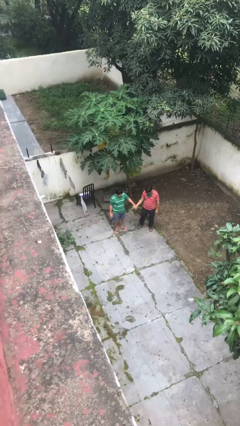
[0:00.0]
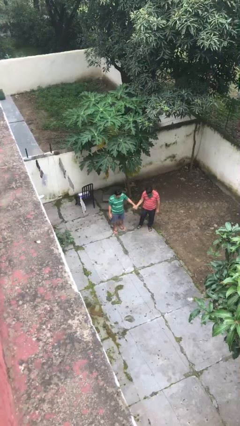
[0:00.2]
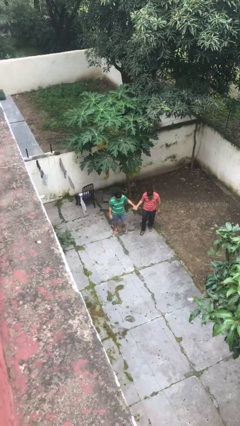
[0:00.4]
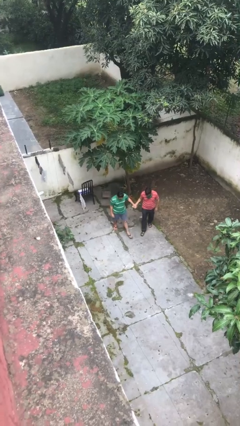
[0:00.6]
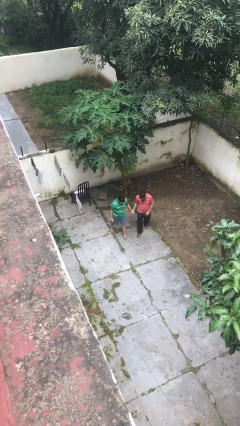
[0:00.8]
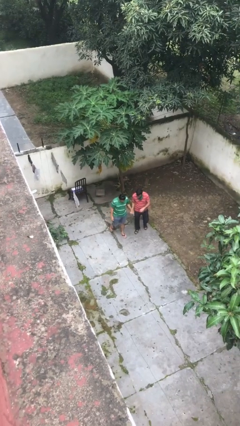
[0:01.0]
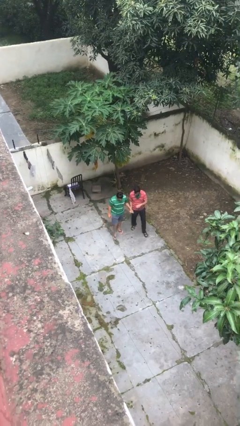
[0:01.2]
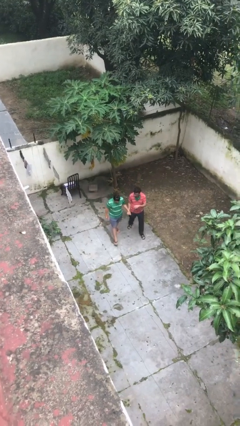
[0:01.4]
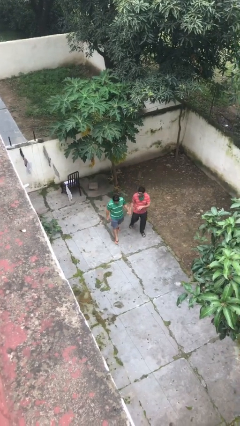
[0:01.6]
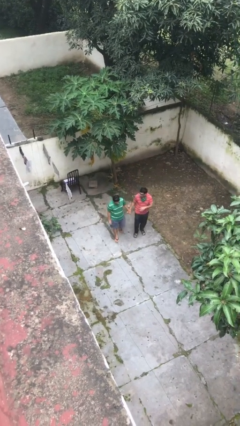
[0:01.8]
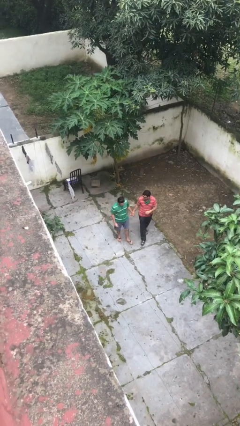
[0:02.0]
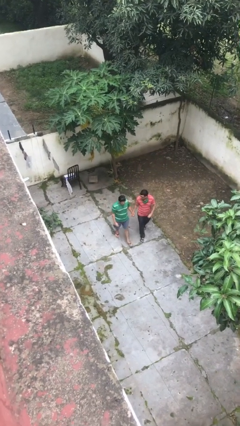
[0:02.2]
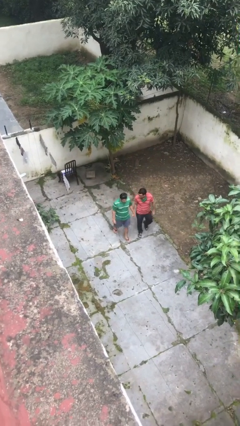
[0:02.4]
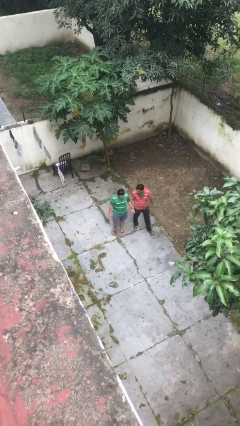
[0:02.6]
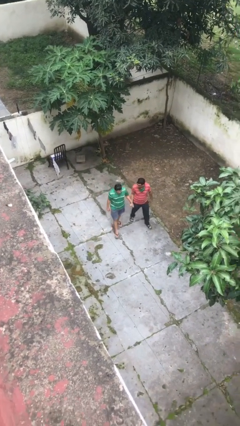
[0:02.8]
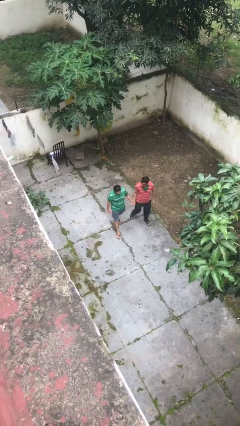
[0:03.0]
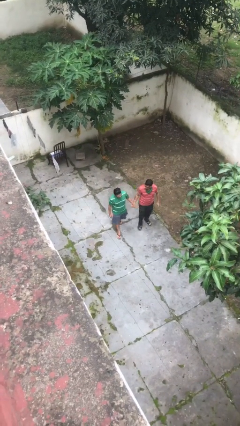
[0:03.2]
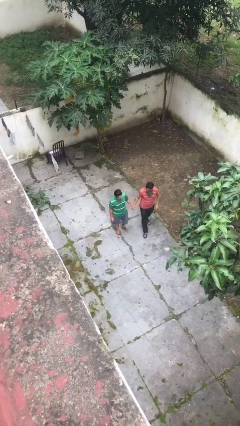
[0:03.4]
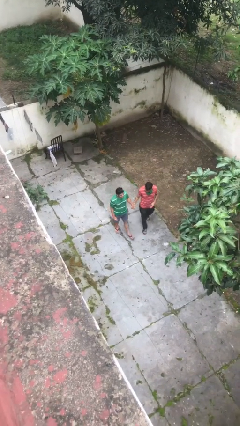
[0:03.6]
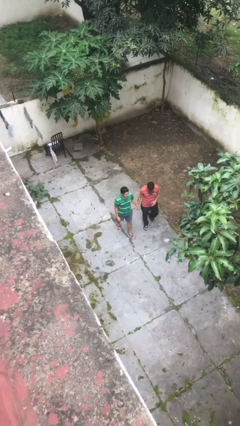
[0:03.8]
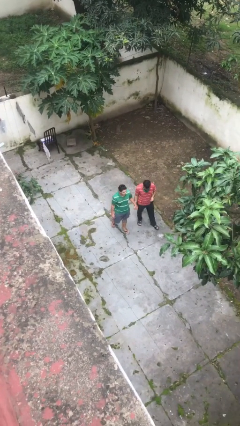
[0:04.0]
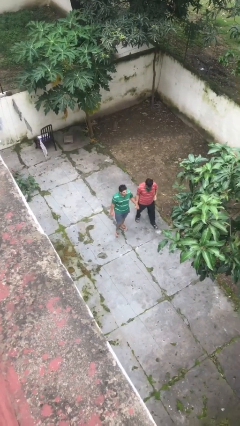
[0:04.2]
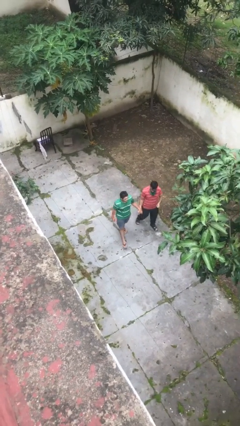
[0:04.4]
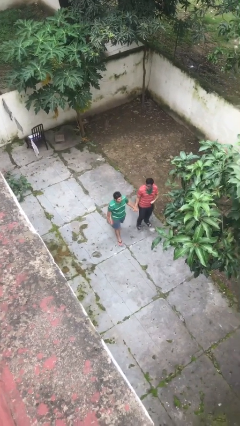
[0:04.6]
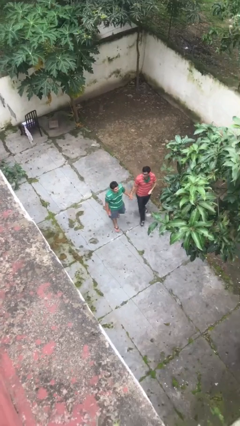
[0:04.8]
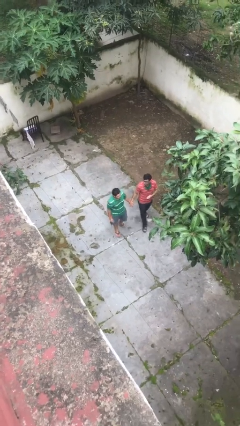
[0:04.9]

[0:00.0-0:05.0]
person holds hand

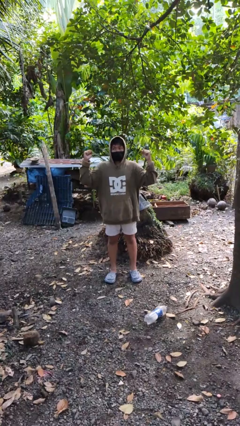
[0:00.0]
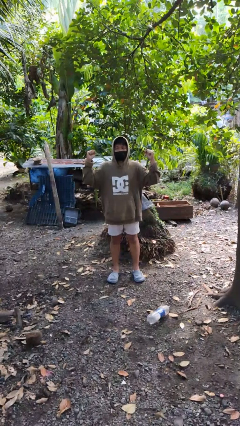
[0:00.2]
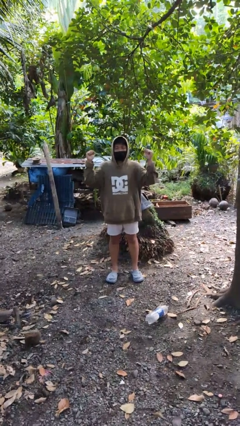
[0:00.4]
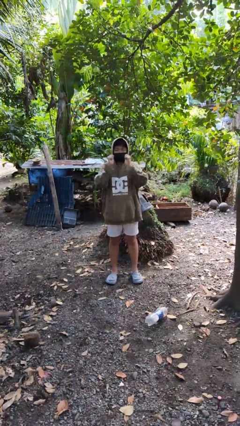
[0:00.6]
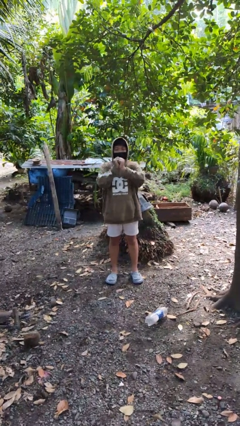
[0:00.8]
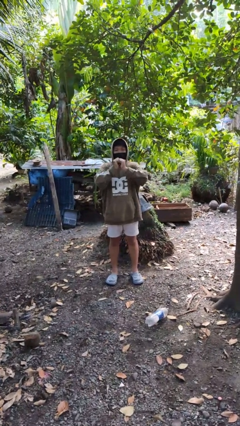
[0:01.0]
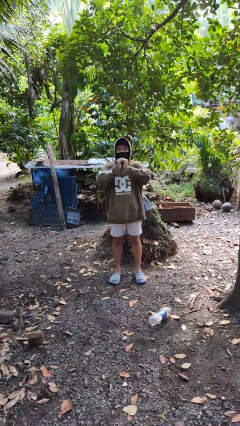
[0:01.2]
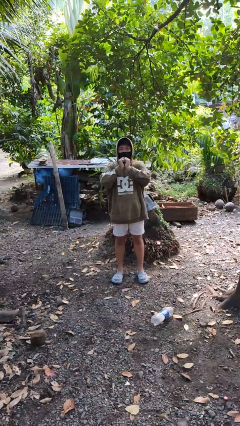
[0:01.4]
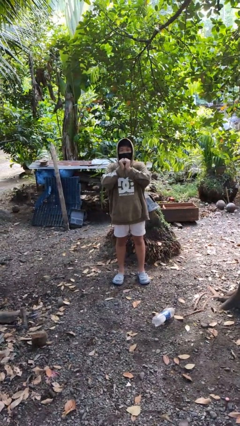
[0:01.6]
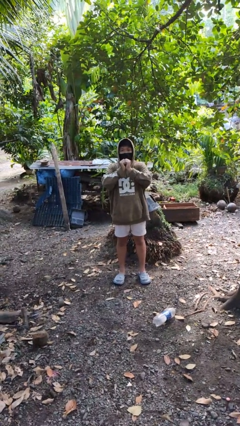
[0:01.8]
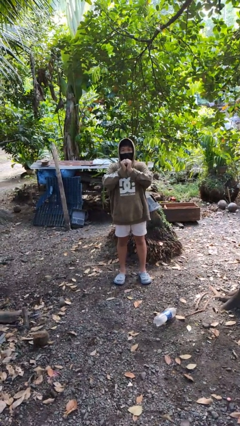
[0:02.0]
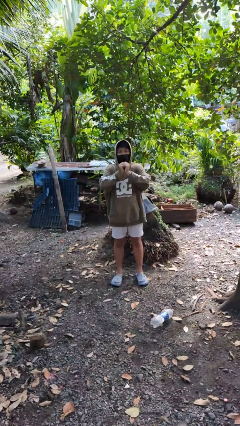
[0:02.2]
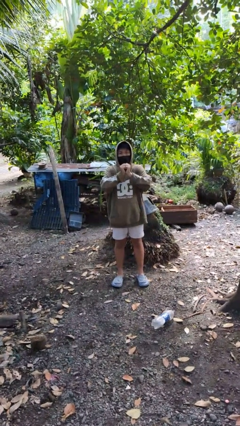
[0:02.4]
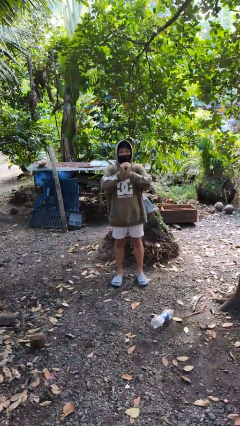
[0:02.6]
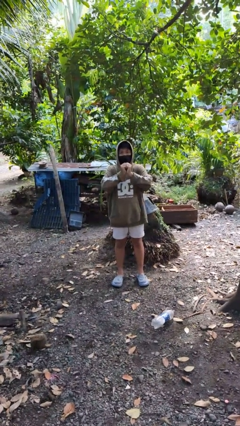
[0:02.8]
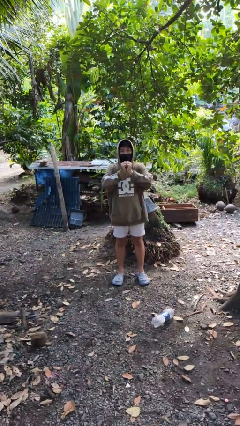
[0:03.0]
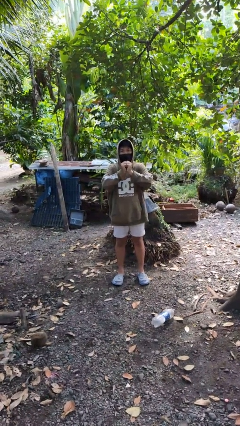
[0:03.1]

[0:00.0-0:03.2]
person gestures zoom in

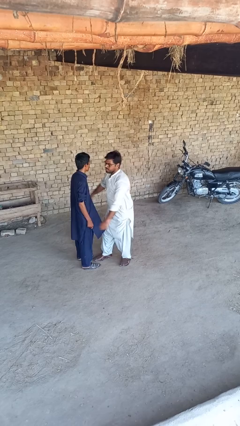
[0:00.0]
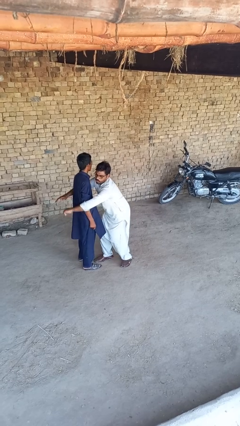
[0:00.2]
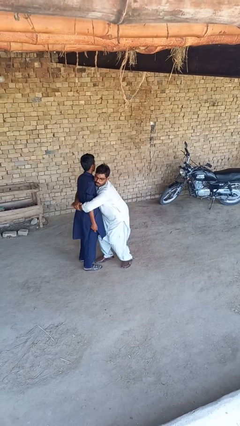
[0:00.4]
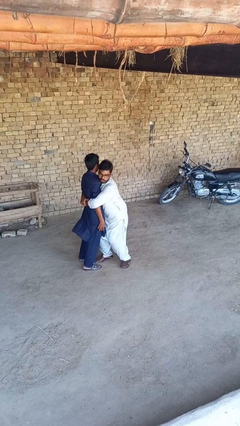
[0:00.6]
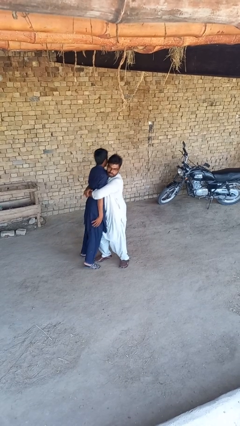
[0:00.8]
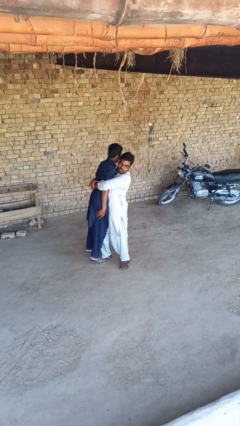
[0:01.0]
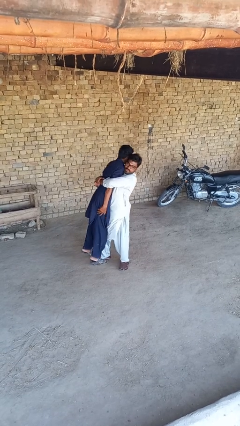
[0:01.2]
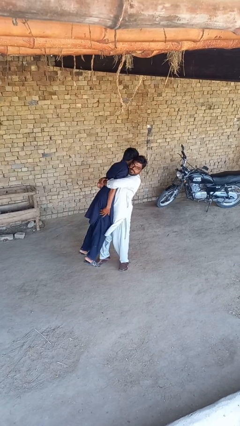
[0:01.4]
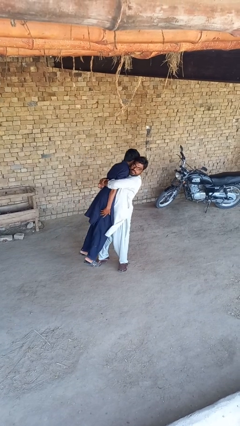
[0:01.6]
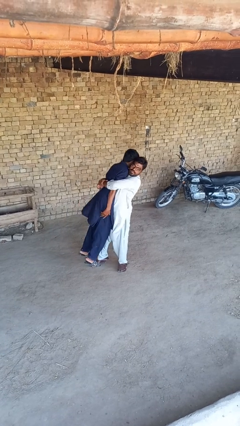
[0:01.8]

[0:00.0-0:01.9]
person picks up person

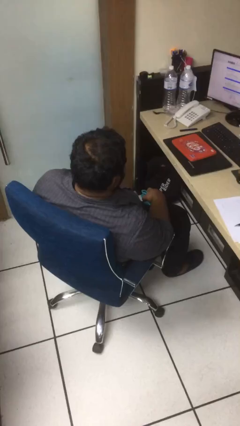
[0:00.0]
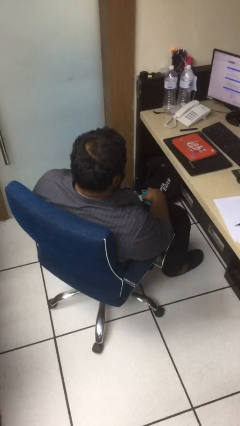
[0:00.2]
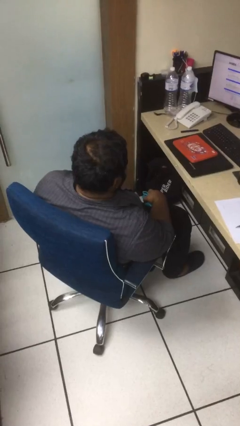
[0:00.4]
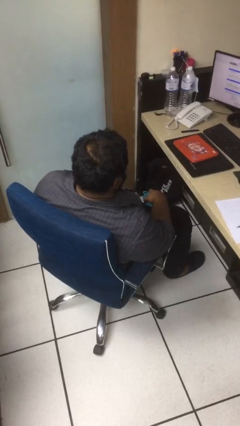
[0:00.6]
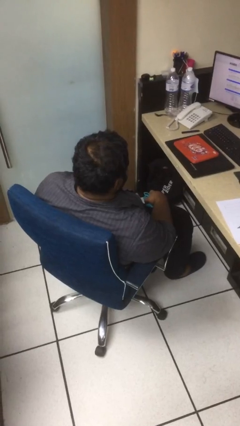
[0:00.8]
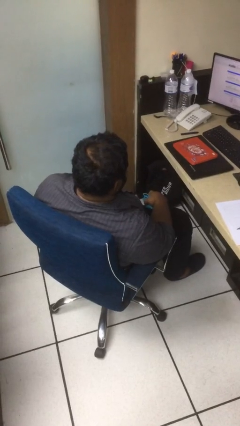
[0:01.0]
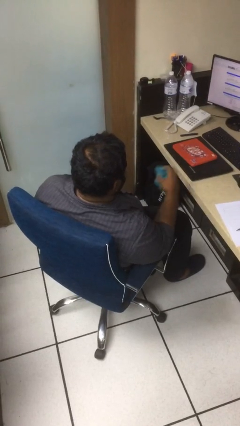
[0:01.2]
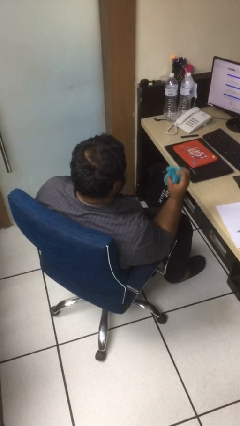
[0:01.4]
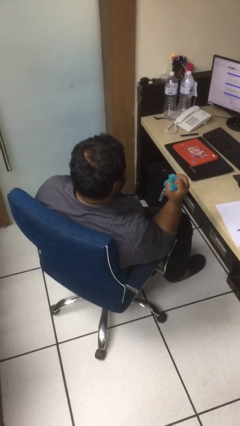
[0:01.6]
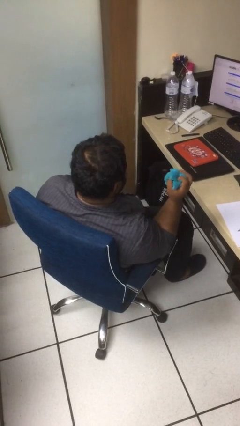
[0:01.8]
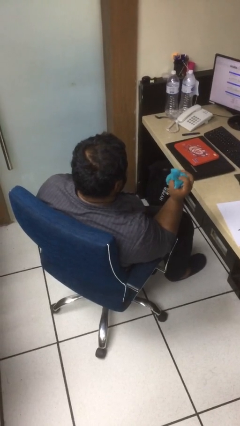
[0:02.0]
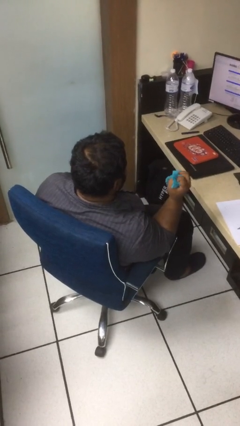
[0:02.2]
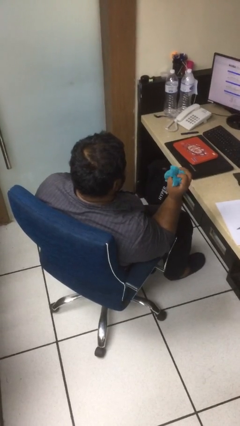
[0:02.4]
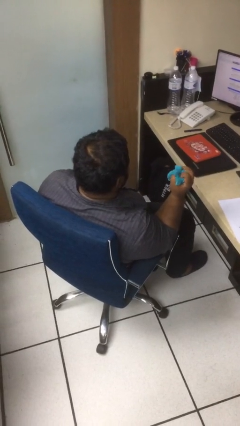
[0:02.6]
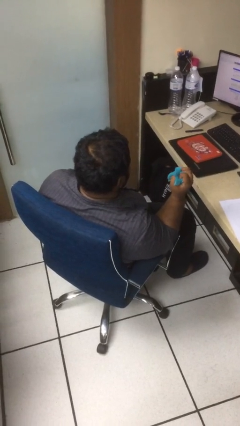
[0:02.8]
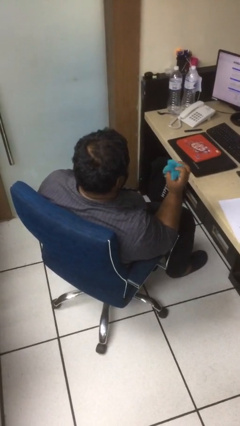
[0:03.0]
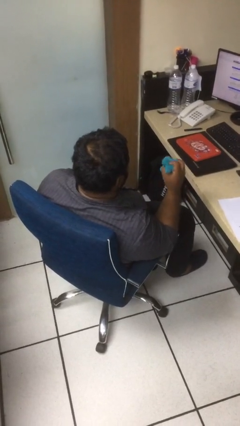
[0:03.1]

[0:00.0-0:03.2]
person squeezes object

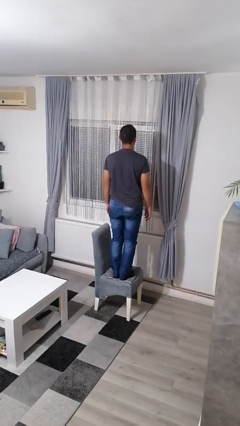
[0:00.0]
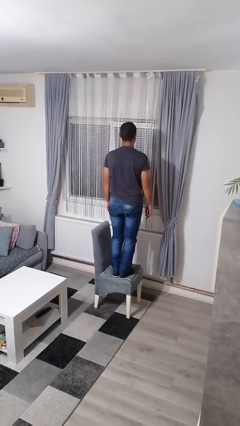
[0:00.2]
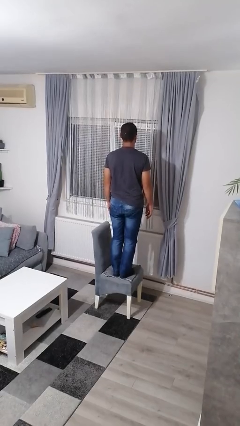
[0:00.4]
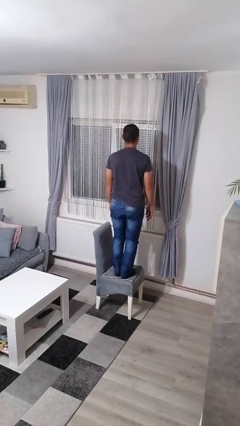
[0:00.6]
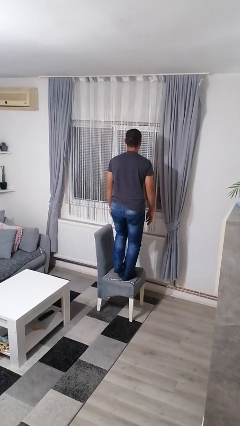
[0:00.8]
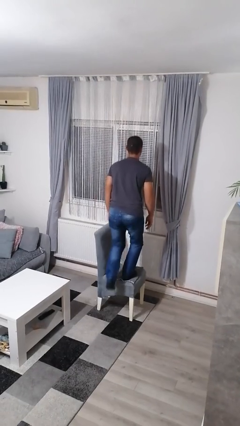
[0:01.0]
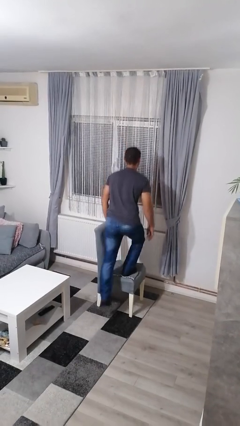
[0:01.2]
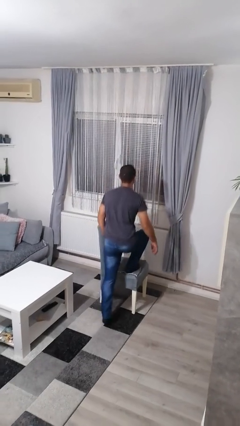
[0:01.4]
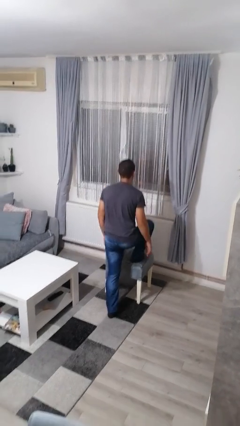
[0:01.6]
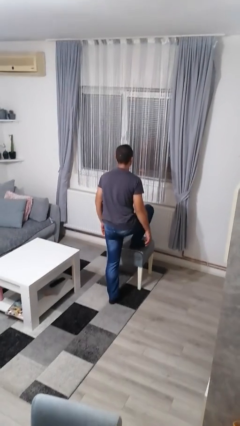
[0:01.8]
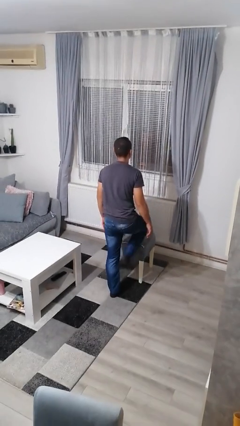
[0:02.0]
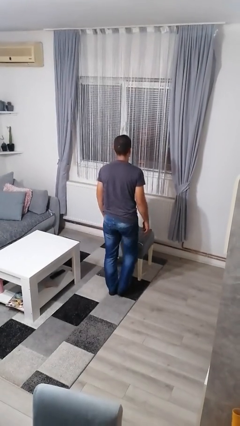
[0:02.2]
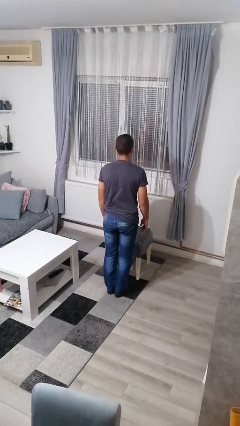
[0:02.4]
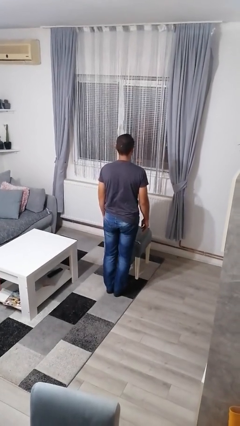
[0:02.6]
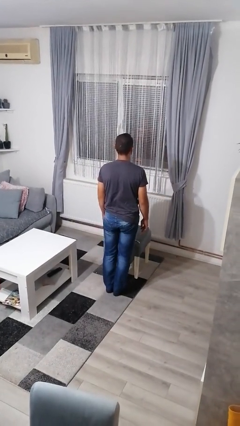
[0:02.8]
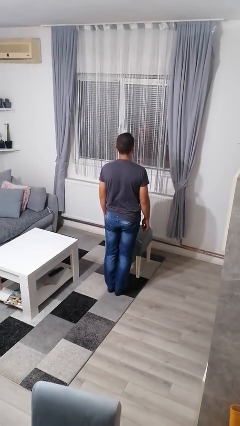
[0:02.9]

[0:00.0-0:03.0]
person climbs off chair

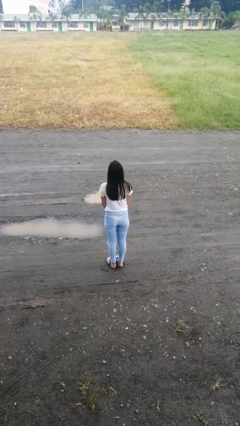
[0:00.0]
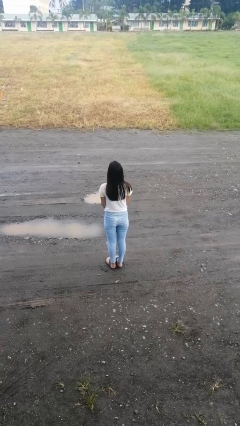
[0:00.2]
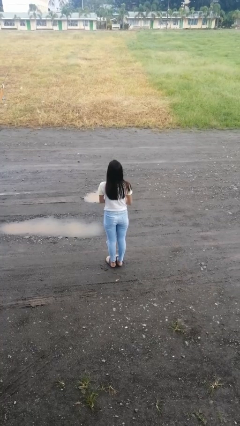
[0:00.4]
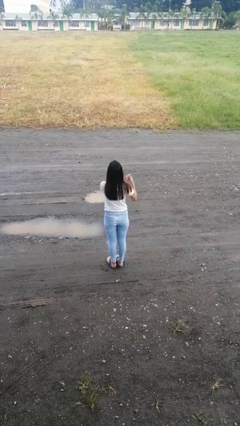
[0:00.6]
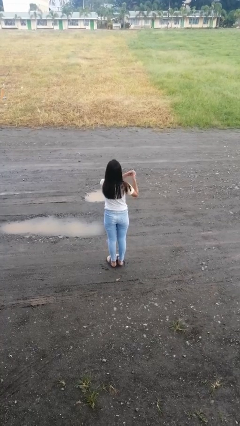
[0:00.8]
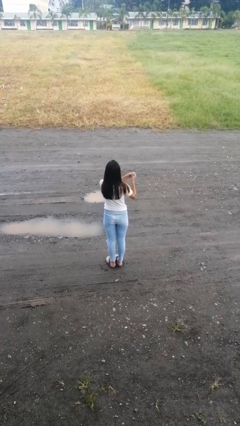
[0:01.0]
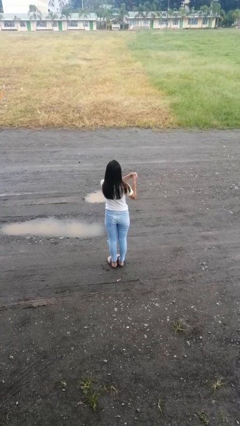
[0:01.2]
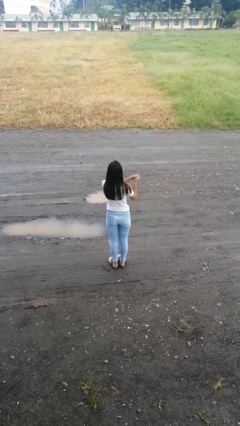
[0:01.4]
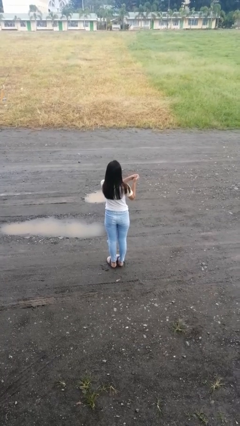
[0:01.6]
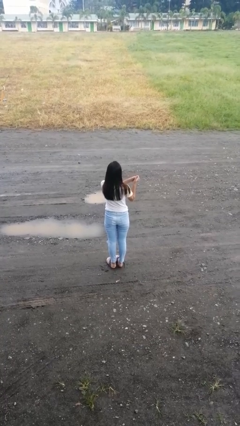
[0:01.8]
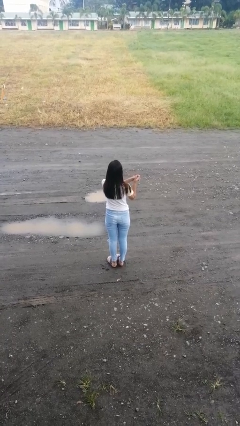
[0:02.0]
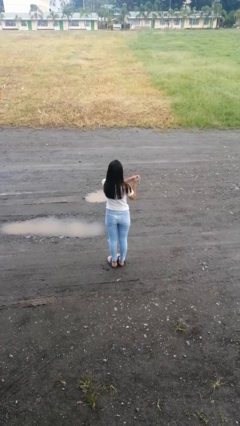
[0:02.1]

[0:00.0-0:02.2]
person cracks knuckles
